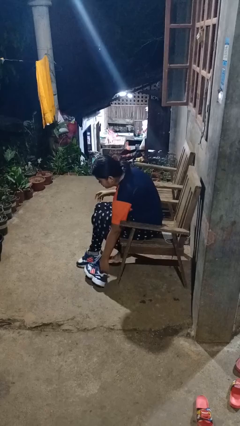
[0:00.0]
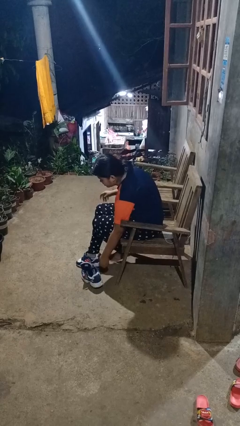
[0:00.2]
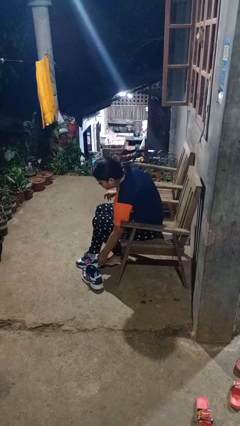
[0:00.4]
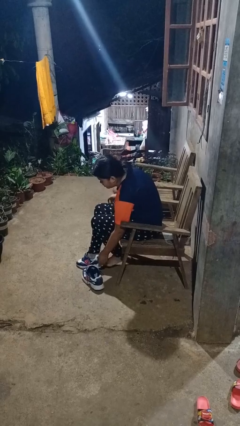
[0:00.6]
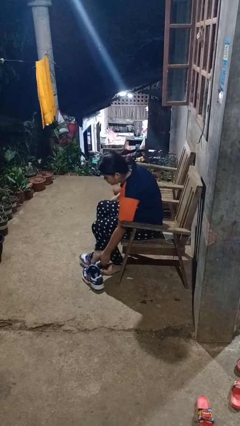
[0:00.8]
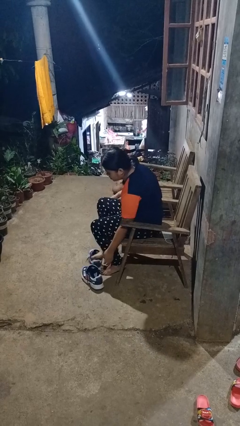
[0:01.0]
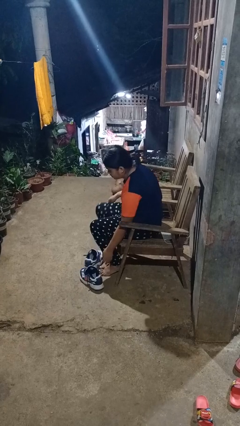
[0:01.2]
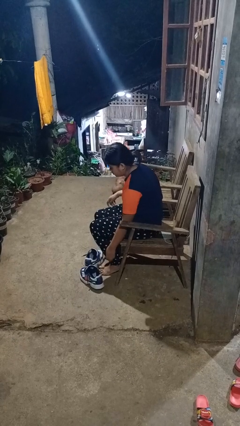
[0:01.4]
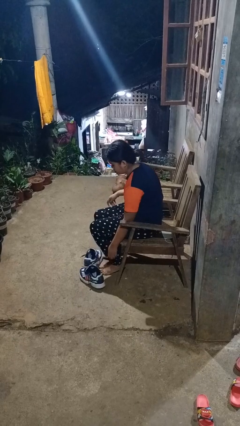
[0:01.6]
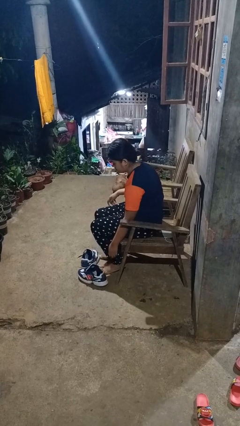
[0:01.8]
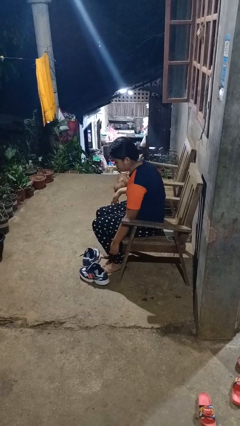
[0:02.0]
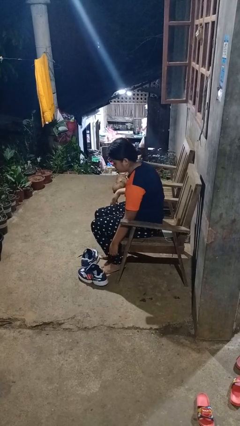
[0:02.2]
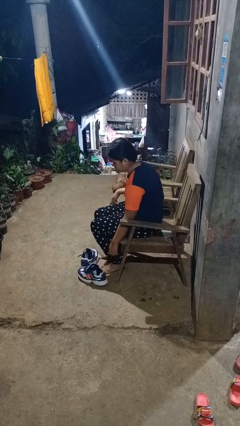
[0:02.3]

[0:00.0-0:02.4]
person takes off shoes

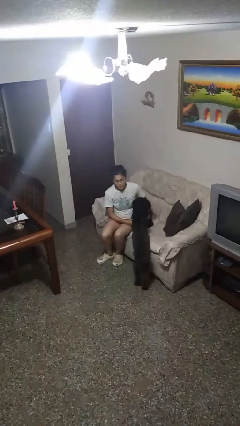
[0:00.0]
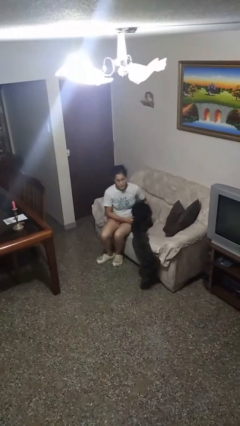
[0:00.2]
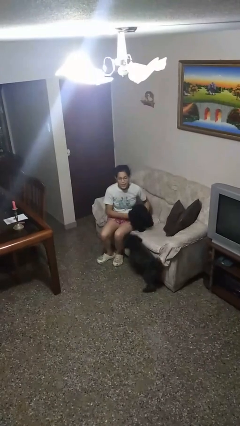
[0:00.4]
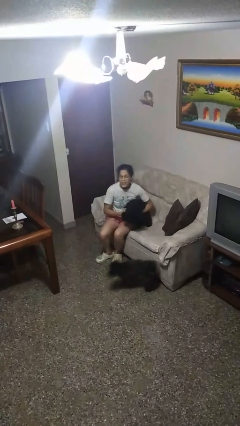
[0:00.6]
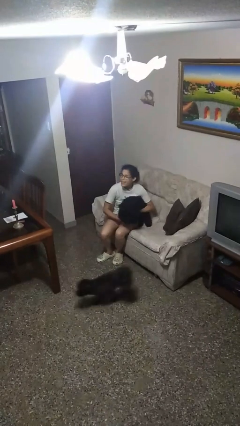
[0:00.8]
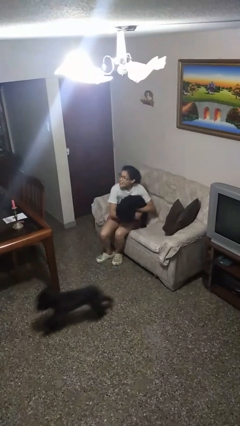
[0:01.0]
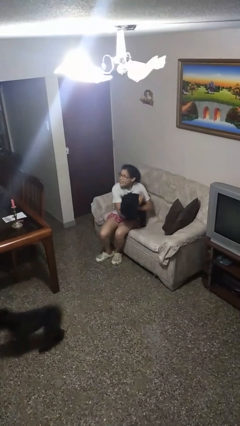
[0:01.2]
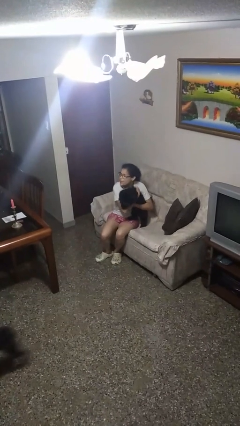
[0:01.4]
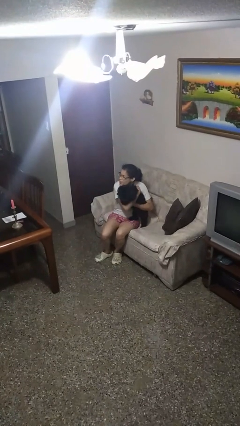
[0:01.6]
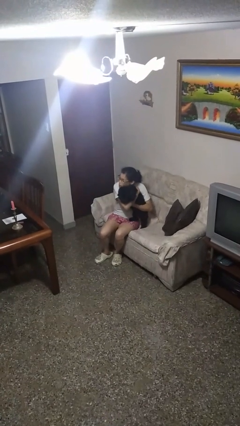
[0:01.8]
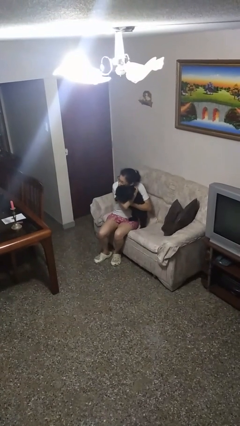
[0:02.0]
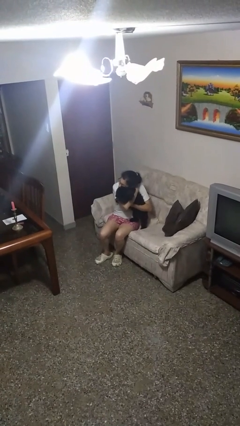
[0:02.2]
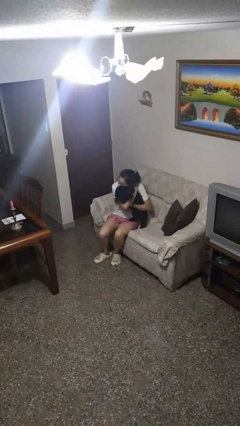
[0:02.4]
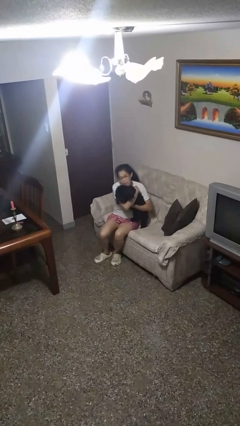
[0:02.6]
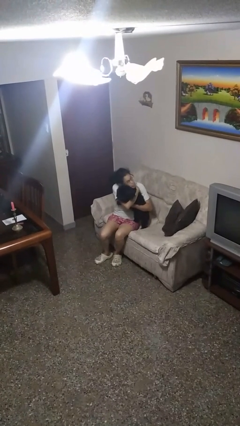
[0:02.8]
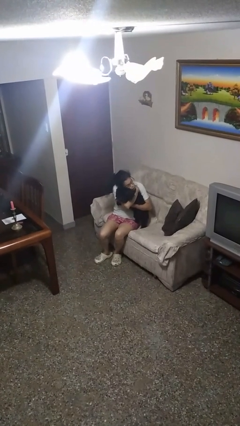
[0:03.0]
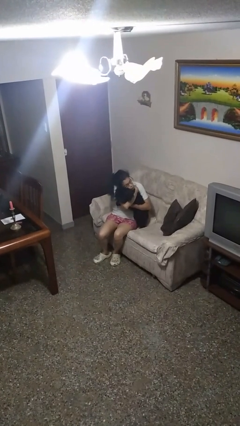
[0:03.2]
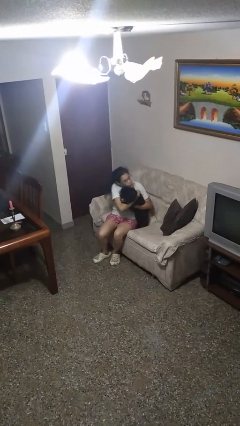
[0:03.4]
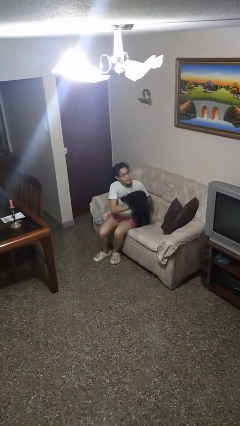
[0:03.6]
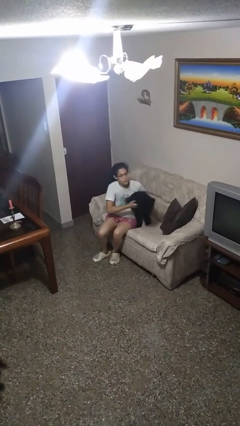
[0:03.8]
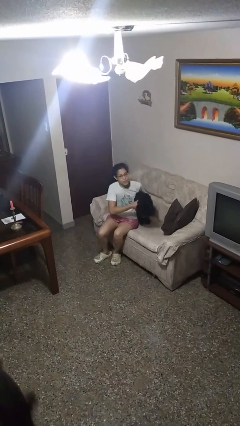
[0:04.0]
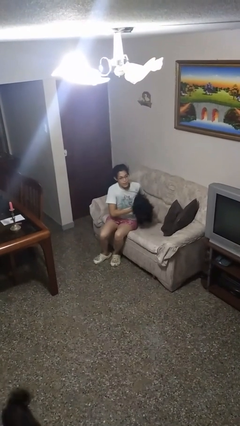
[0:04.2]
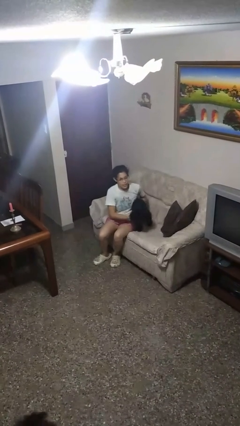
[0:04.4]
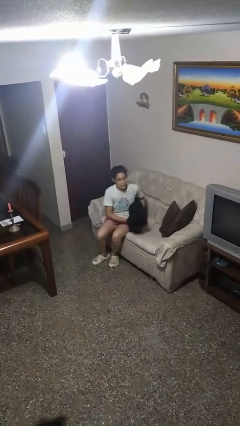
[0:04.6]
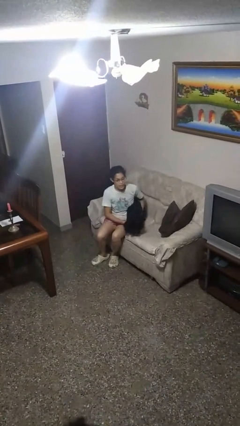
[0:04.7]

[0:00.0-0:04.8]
person hugs dog

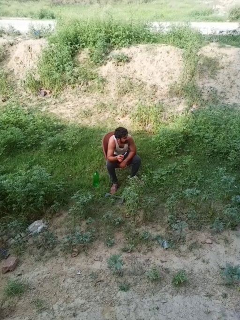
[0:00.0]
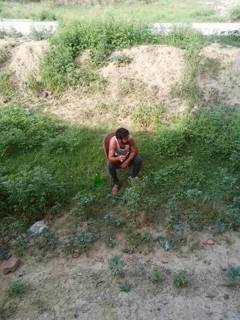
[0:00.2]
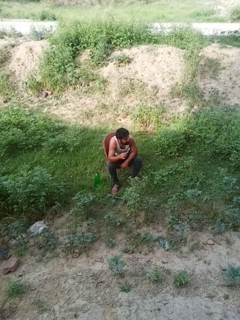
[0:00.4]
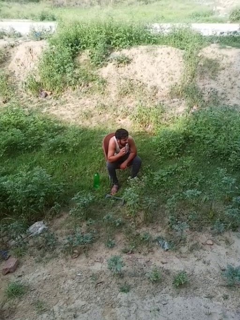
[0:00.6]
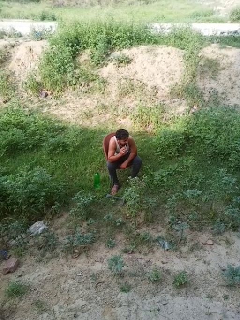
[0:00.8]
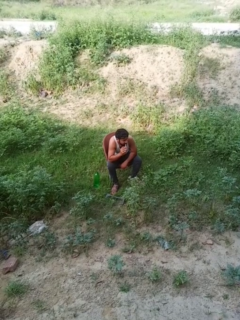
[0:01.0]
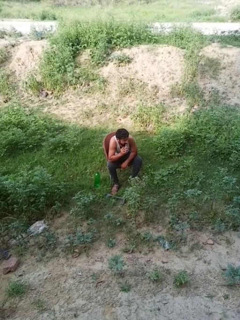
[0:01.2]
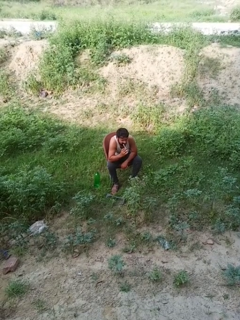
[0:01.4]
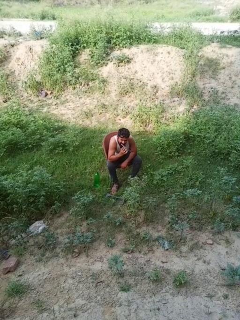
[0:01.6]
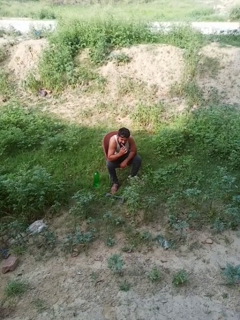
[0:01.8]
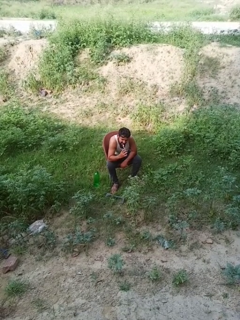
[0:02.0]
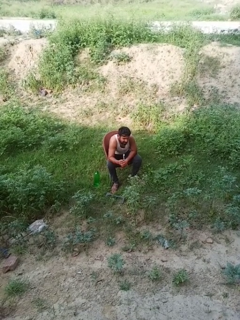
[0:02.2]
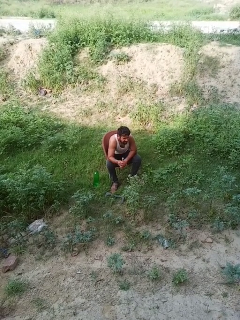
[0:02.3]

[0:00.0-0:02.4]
person brushes teeth

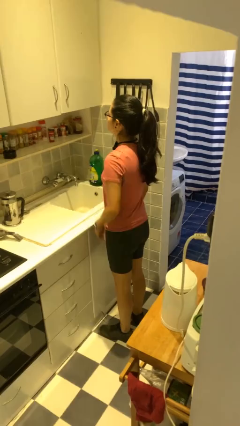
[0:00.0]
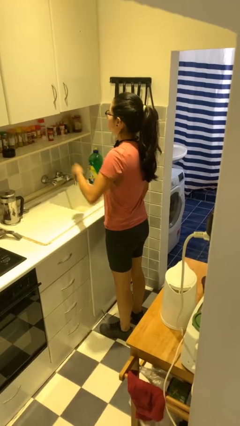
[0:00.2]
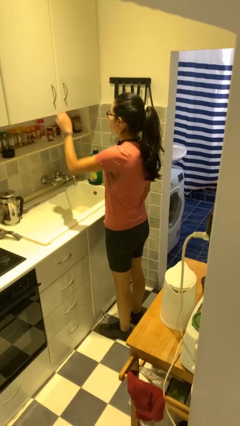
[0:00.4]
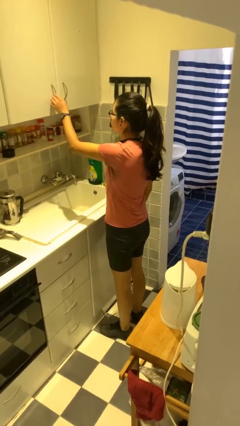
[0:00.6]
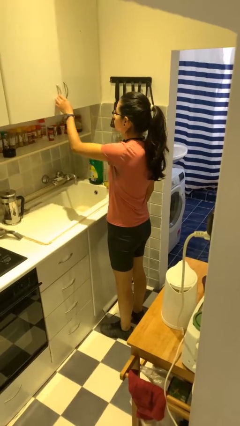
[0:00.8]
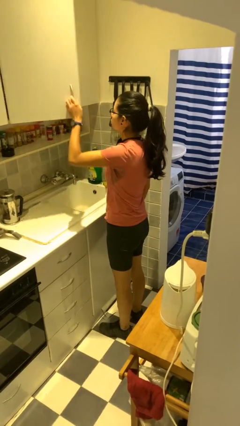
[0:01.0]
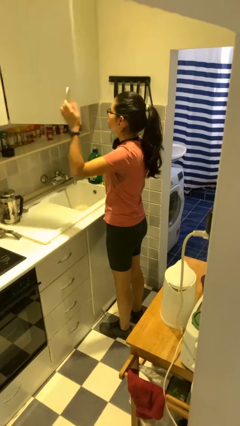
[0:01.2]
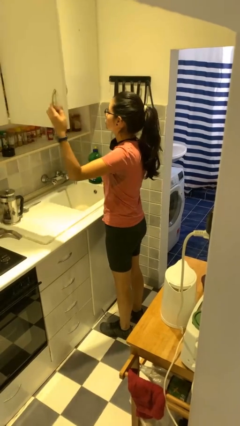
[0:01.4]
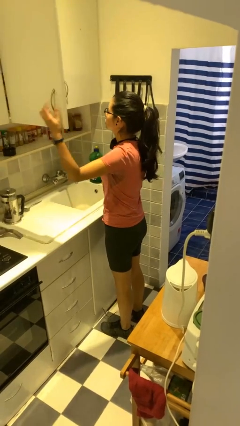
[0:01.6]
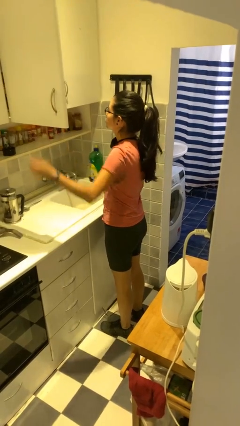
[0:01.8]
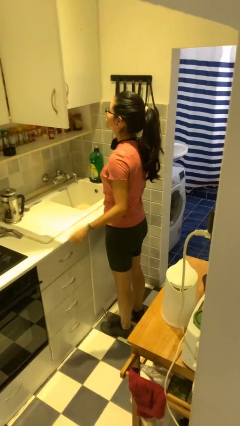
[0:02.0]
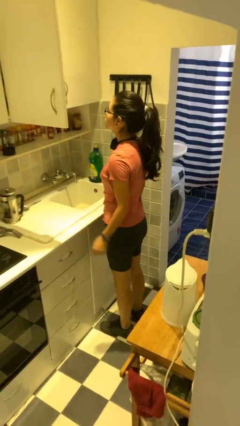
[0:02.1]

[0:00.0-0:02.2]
person opens cabinet

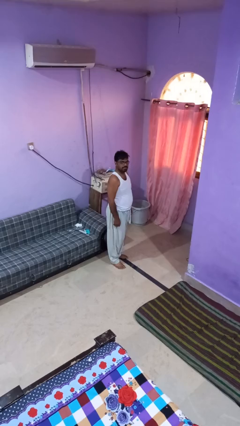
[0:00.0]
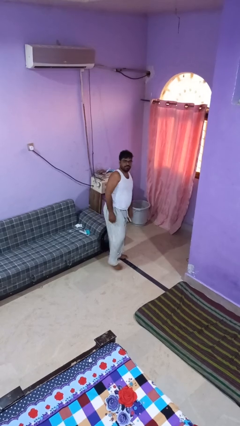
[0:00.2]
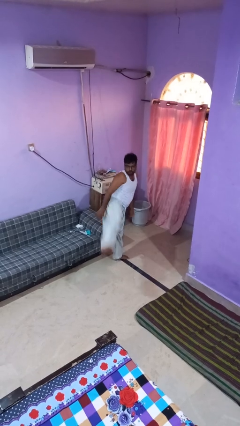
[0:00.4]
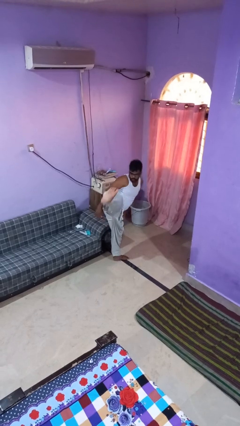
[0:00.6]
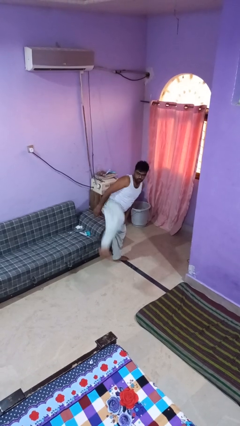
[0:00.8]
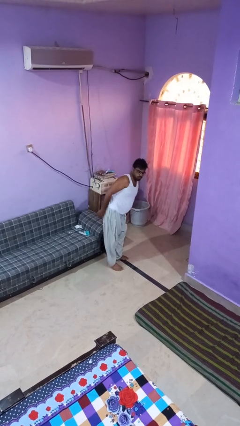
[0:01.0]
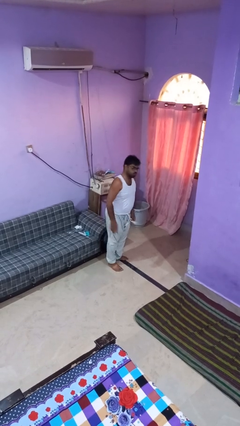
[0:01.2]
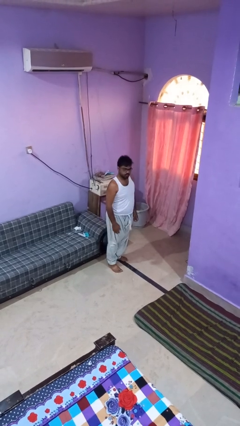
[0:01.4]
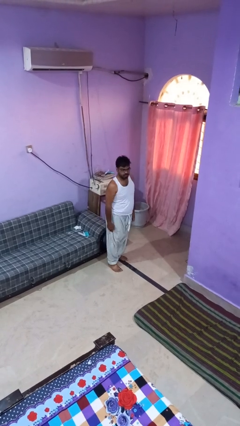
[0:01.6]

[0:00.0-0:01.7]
person karate kicks

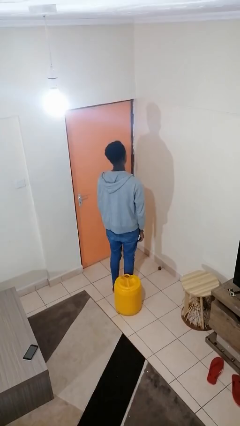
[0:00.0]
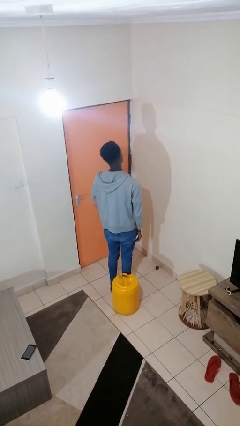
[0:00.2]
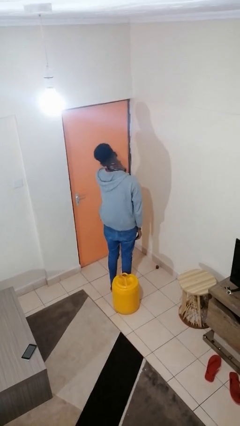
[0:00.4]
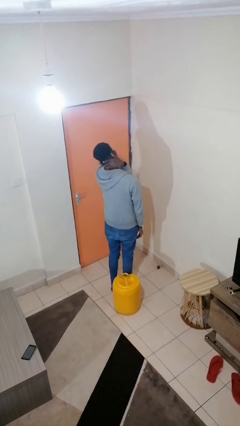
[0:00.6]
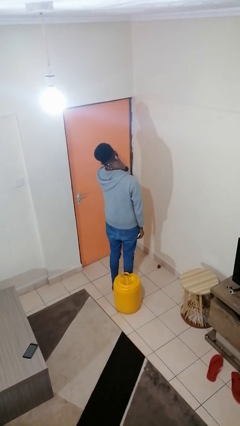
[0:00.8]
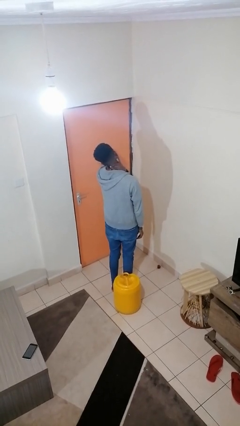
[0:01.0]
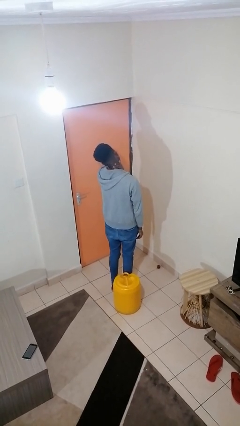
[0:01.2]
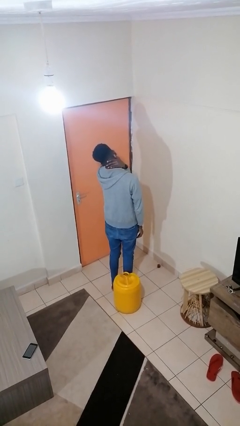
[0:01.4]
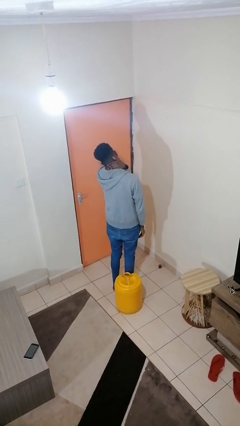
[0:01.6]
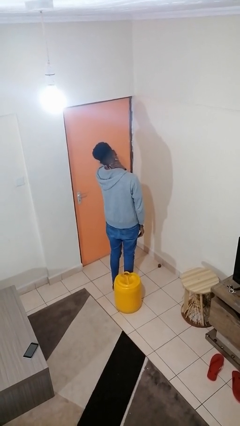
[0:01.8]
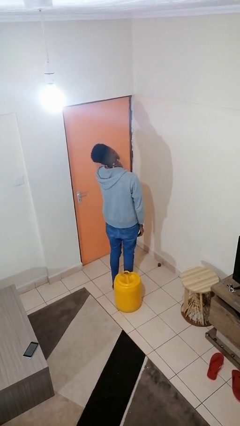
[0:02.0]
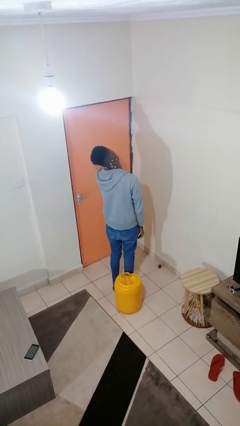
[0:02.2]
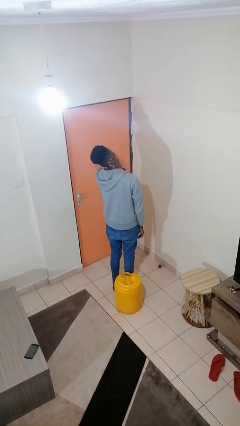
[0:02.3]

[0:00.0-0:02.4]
person rubs neck

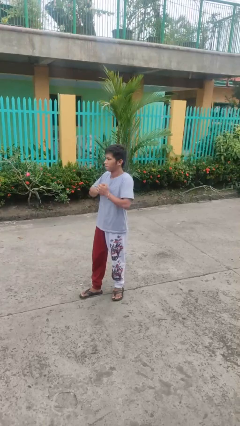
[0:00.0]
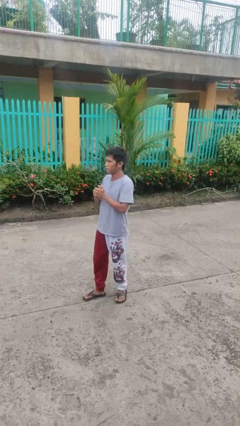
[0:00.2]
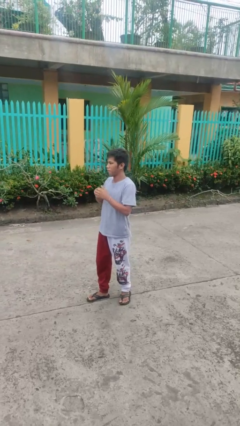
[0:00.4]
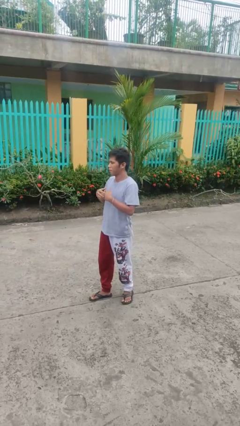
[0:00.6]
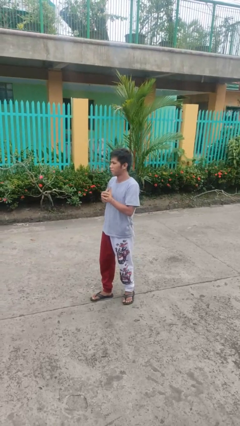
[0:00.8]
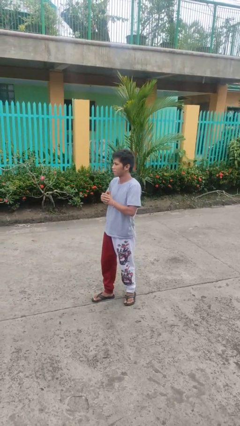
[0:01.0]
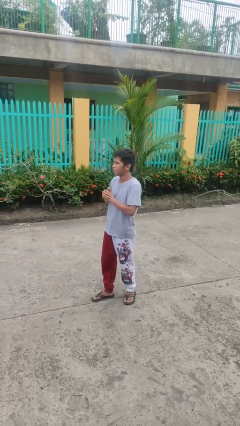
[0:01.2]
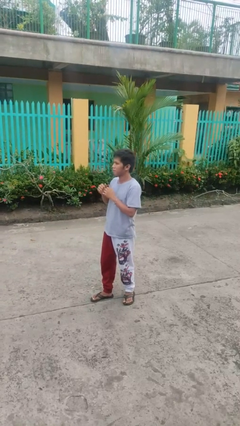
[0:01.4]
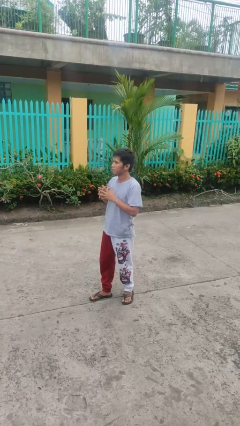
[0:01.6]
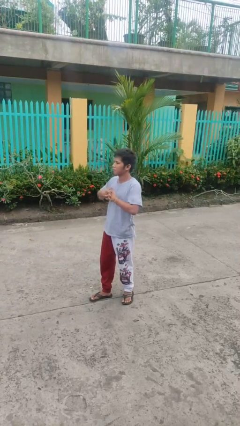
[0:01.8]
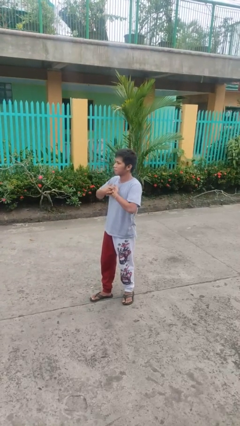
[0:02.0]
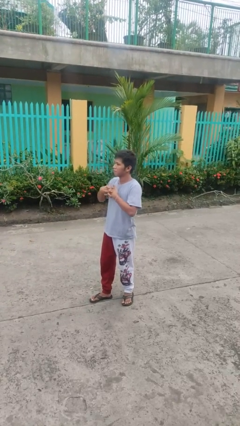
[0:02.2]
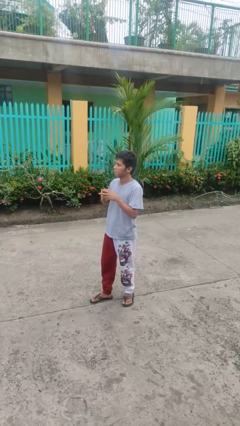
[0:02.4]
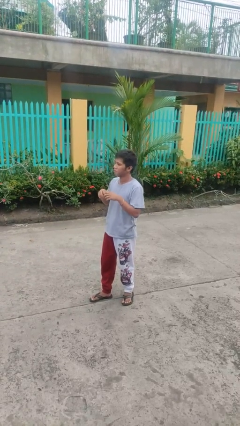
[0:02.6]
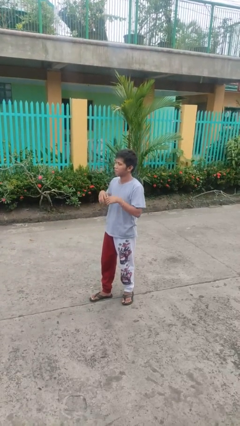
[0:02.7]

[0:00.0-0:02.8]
person cracks knuckles
